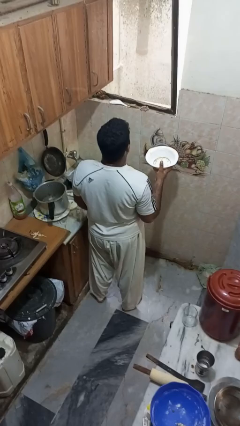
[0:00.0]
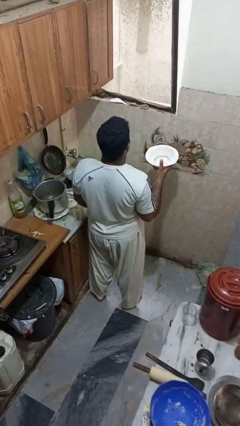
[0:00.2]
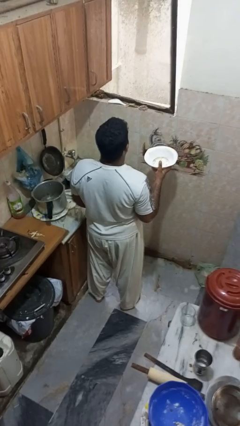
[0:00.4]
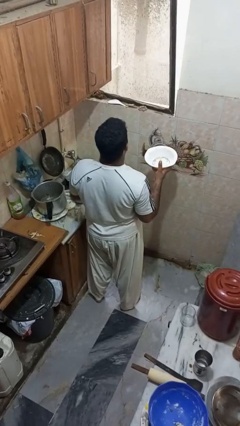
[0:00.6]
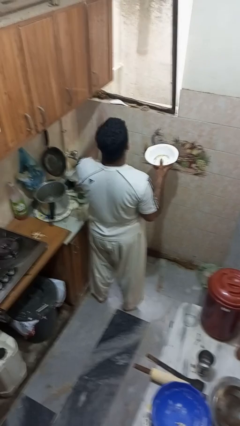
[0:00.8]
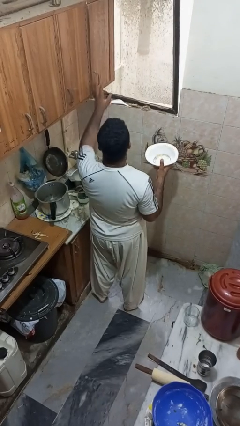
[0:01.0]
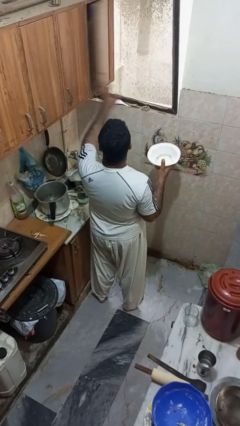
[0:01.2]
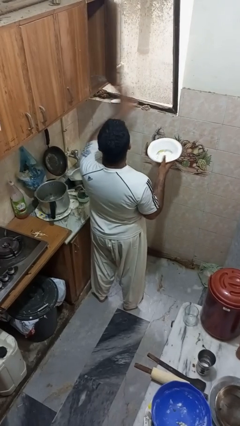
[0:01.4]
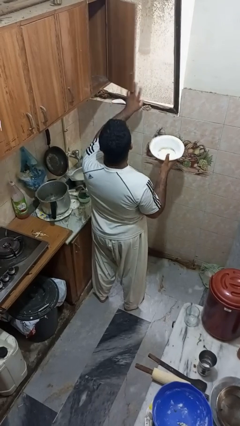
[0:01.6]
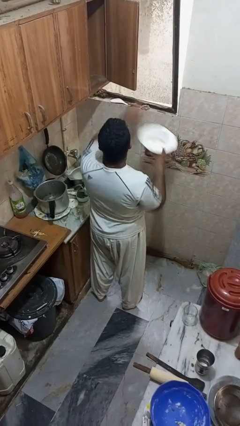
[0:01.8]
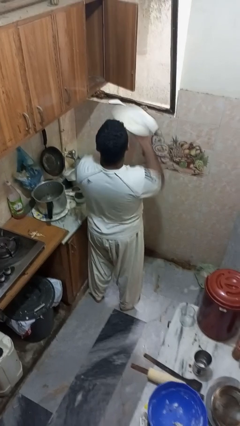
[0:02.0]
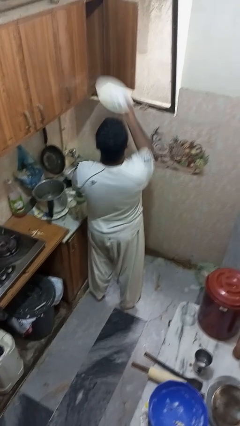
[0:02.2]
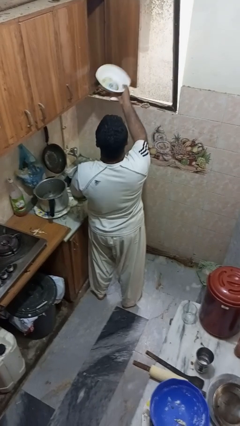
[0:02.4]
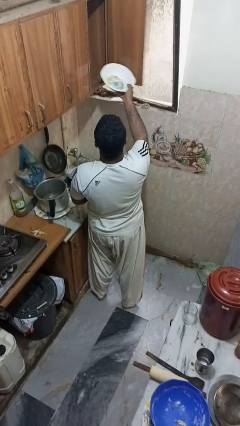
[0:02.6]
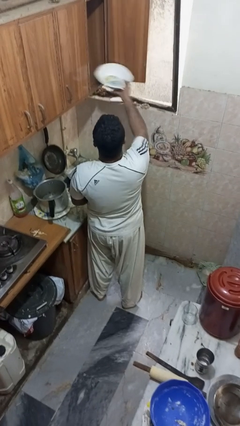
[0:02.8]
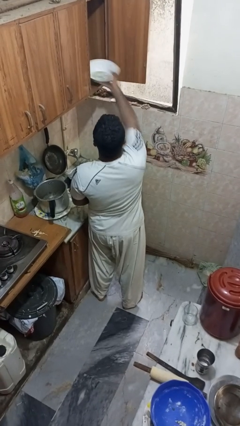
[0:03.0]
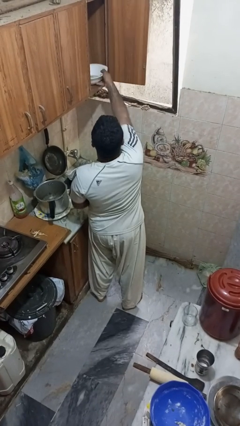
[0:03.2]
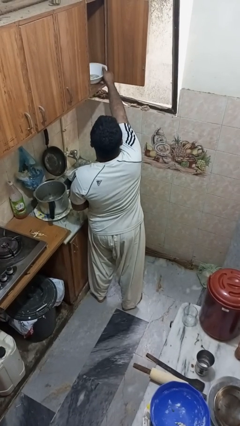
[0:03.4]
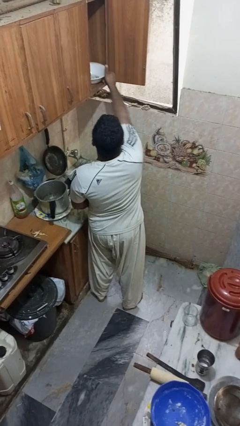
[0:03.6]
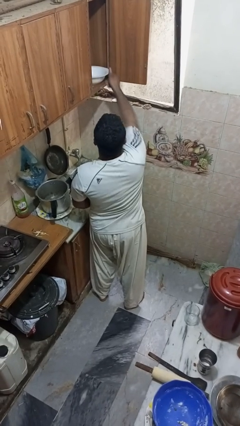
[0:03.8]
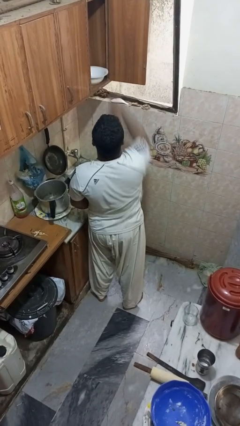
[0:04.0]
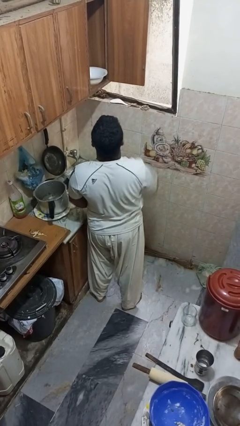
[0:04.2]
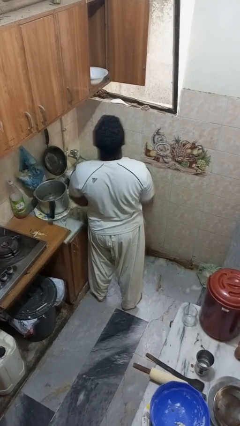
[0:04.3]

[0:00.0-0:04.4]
person puts object in cabinet

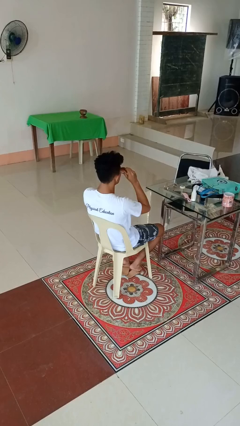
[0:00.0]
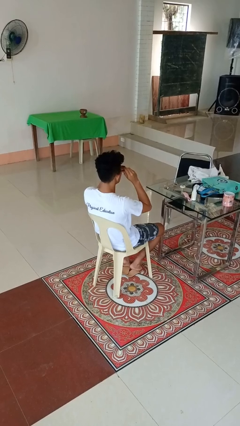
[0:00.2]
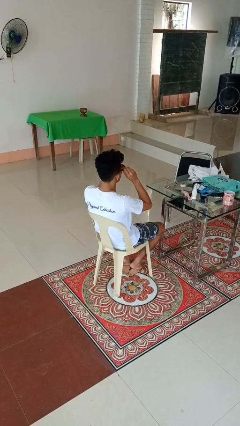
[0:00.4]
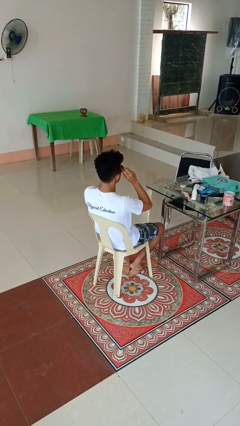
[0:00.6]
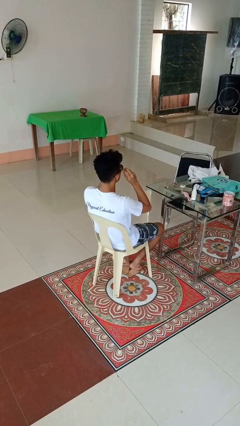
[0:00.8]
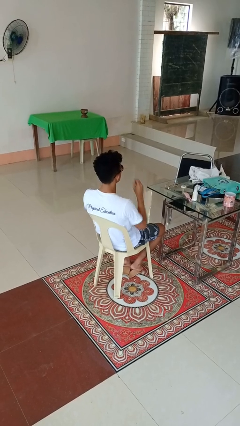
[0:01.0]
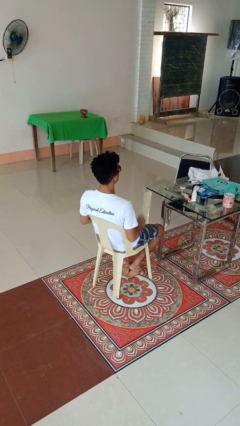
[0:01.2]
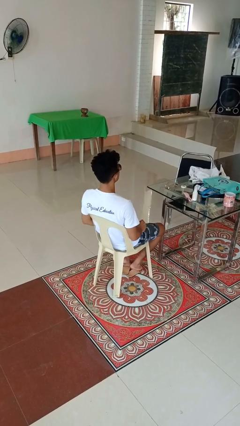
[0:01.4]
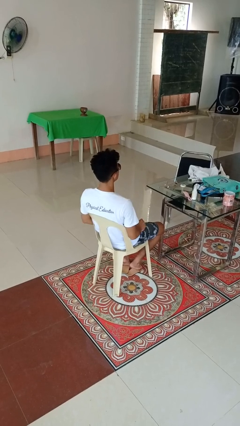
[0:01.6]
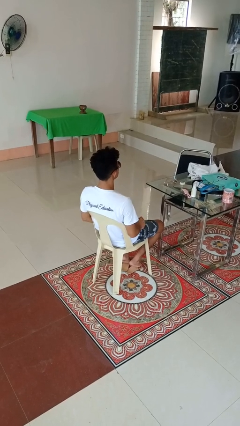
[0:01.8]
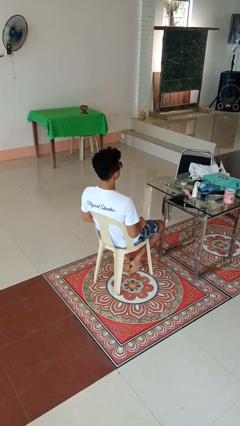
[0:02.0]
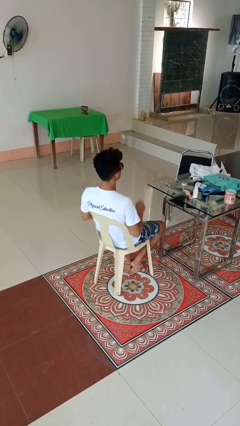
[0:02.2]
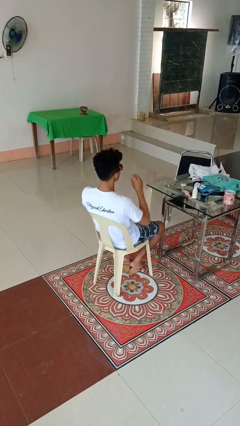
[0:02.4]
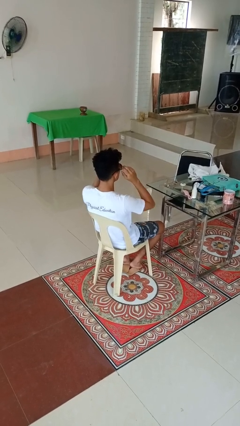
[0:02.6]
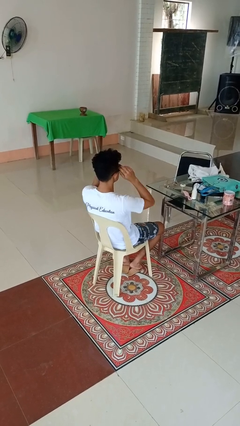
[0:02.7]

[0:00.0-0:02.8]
person puts on sunglasses

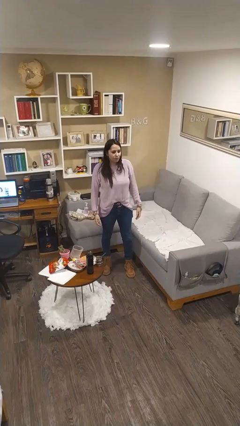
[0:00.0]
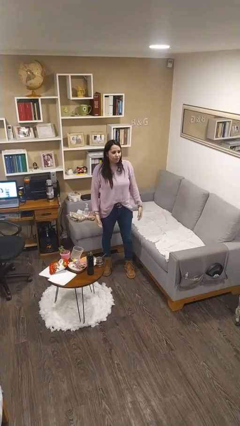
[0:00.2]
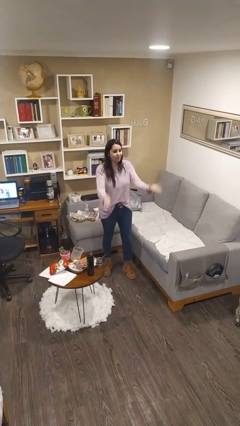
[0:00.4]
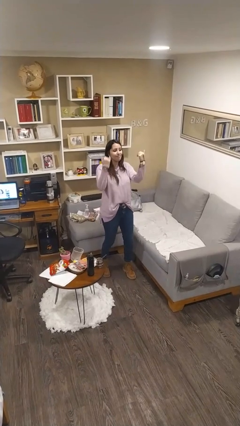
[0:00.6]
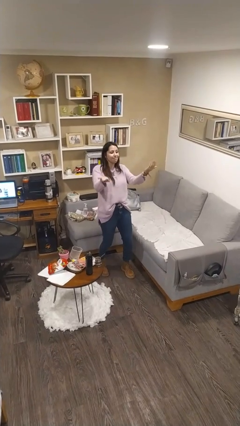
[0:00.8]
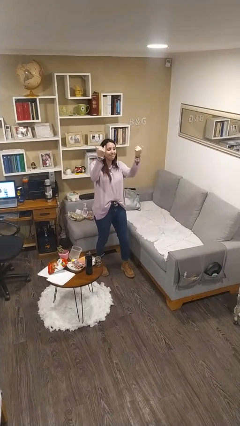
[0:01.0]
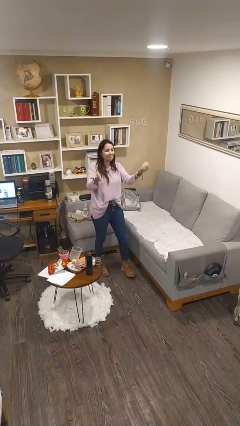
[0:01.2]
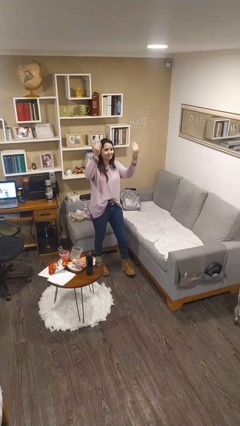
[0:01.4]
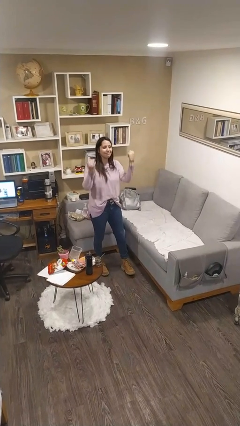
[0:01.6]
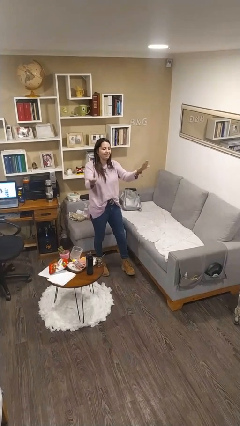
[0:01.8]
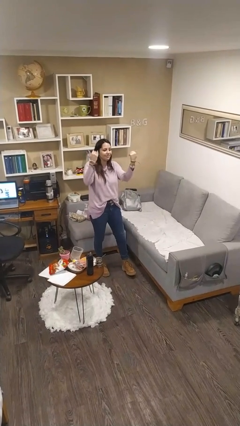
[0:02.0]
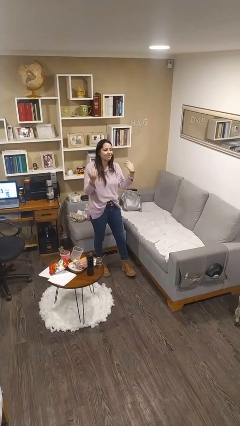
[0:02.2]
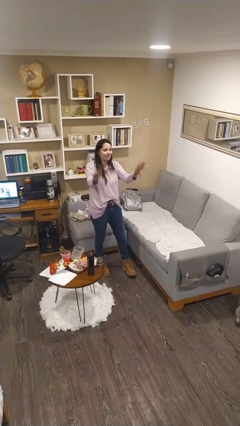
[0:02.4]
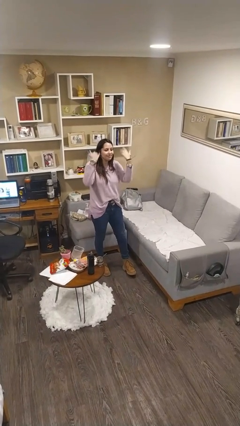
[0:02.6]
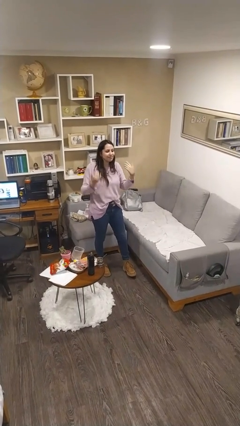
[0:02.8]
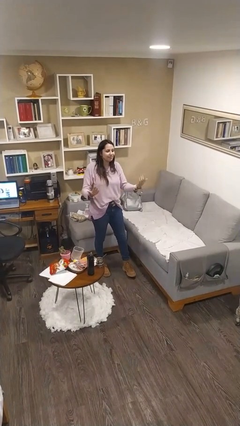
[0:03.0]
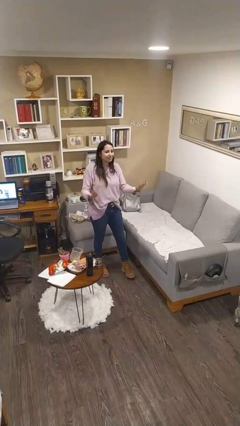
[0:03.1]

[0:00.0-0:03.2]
person gestures come here

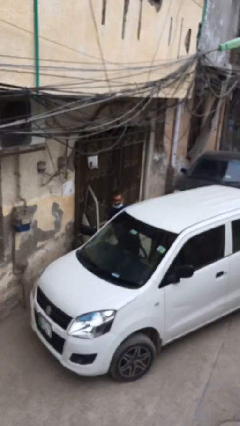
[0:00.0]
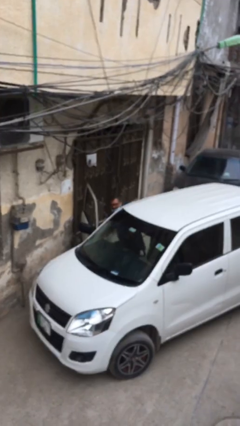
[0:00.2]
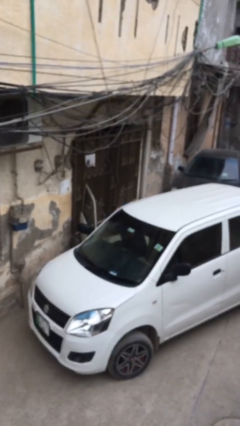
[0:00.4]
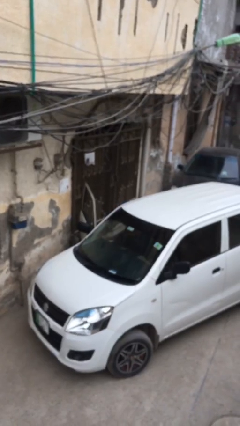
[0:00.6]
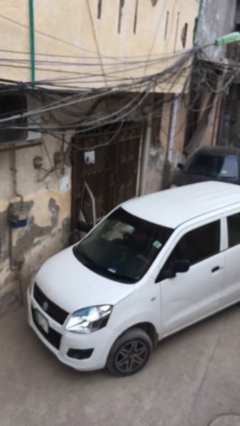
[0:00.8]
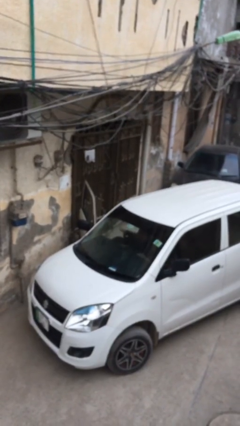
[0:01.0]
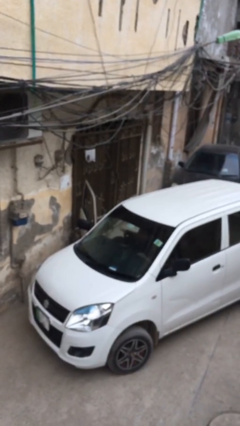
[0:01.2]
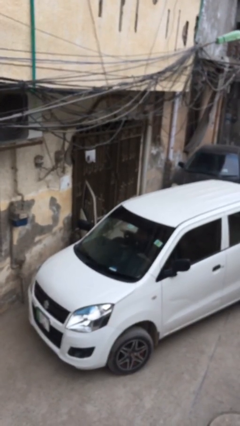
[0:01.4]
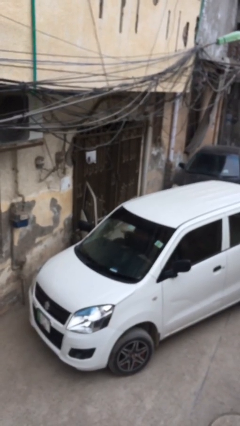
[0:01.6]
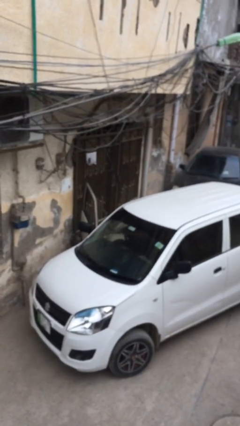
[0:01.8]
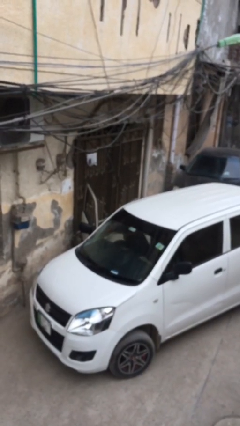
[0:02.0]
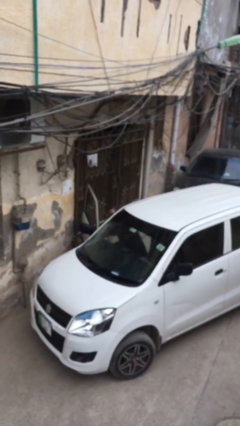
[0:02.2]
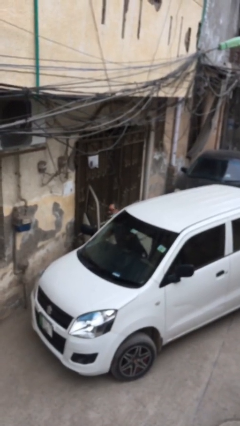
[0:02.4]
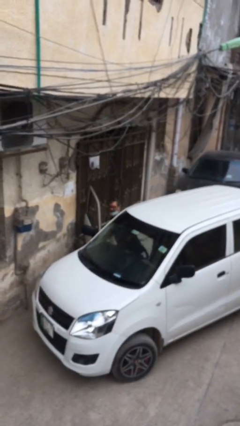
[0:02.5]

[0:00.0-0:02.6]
person enters car

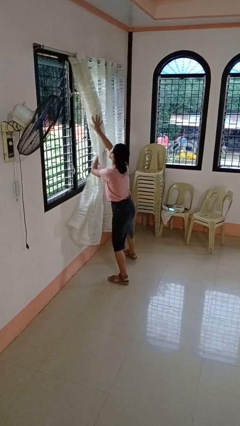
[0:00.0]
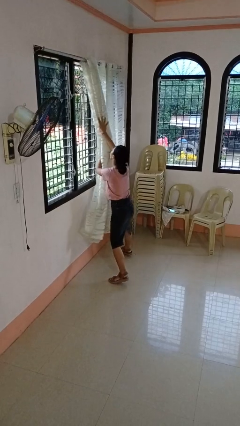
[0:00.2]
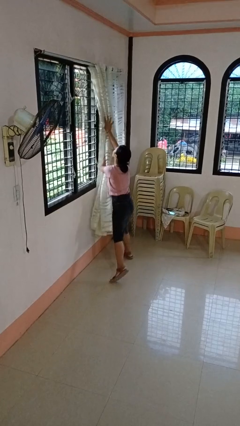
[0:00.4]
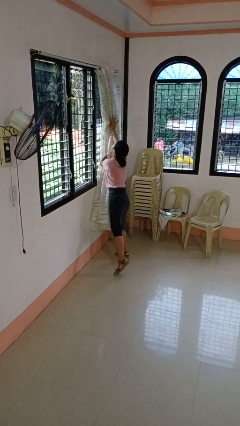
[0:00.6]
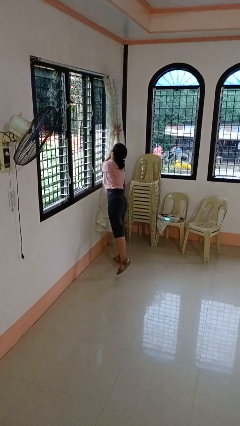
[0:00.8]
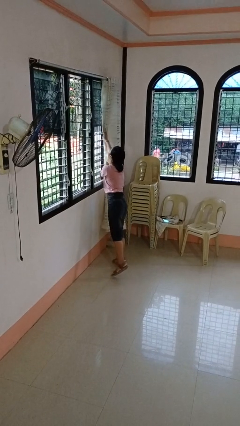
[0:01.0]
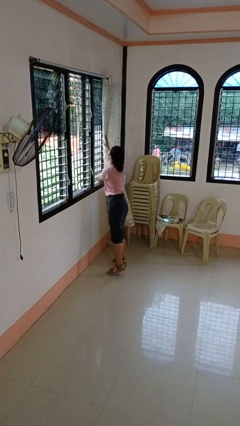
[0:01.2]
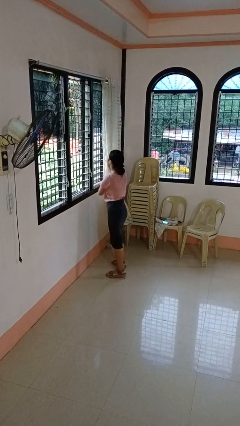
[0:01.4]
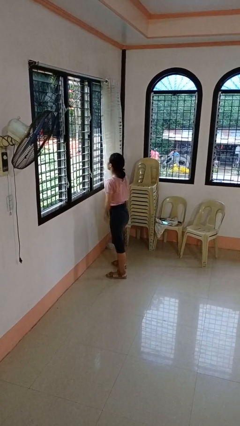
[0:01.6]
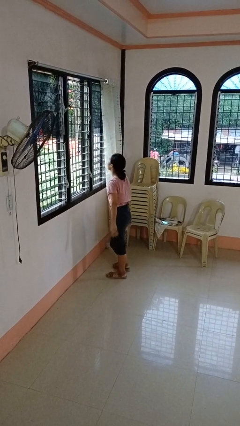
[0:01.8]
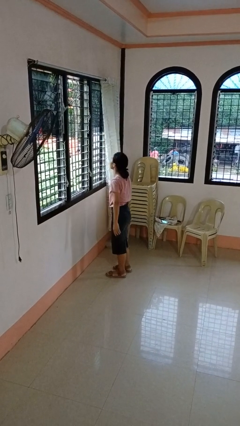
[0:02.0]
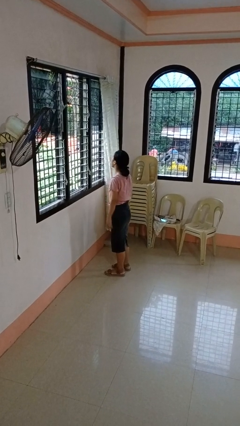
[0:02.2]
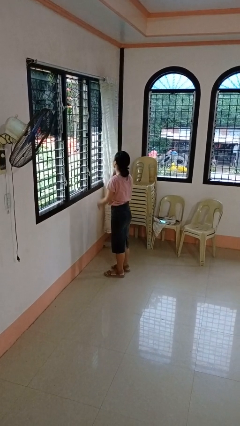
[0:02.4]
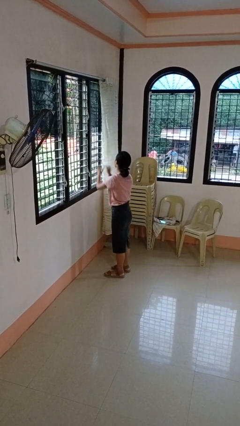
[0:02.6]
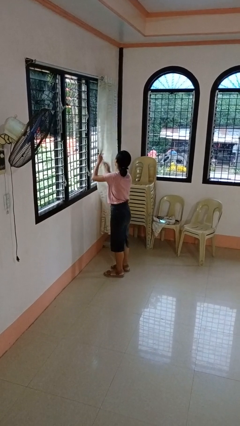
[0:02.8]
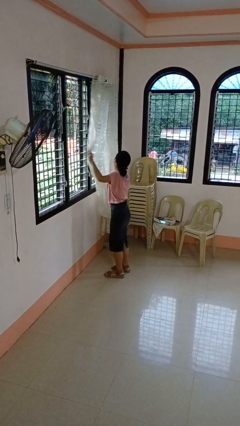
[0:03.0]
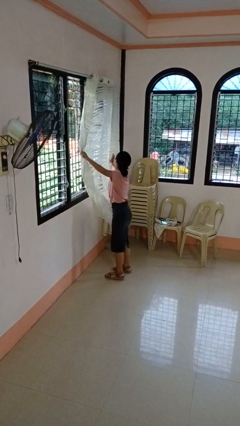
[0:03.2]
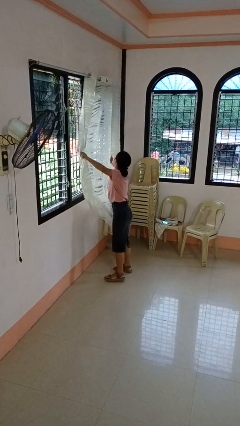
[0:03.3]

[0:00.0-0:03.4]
person opens curtains

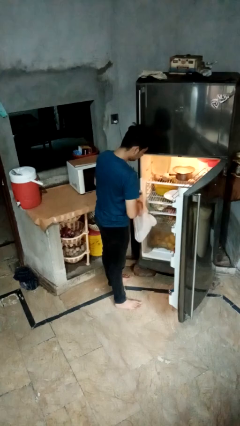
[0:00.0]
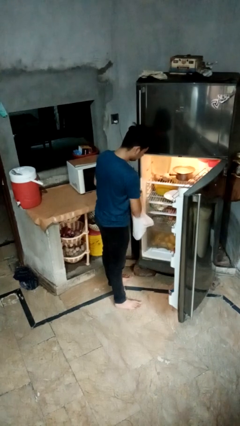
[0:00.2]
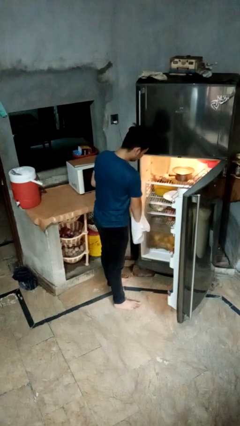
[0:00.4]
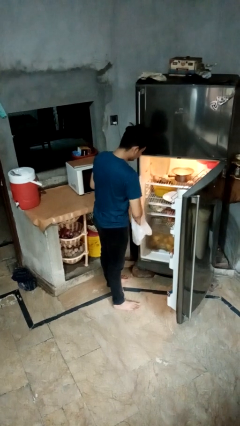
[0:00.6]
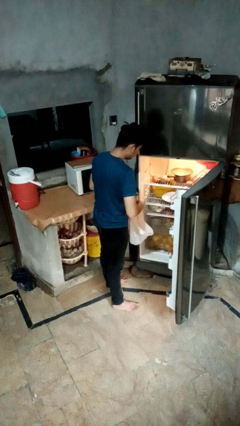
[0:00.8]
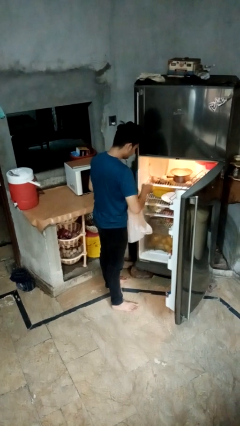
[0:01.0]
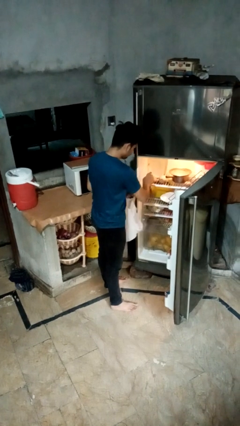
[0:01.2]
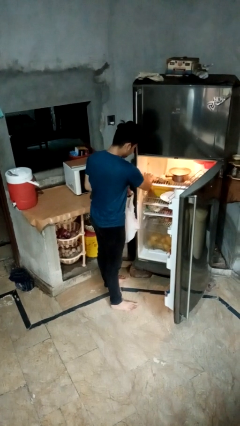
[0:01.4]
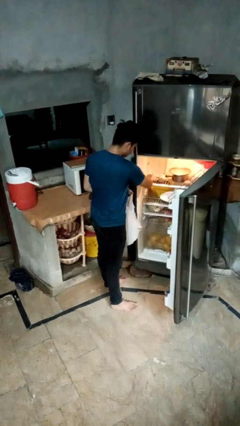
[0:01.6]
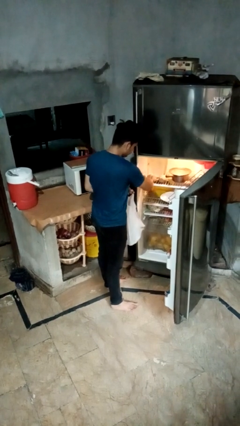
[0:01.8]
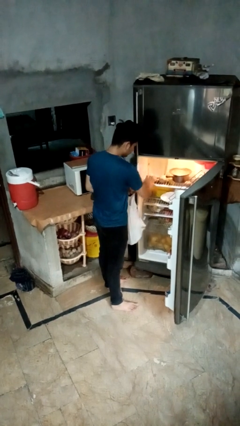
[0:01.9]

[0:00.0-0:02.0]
person loads groceries into refrigerator
